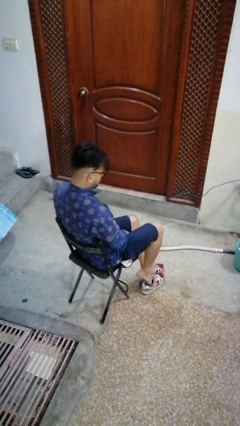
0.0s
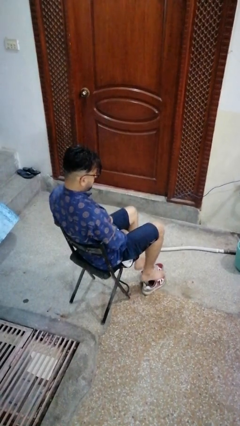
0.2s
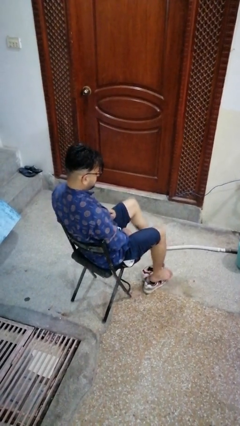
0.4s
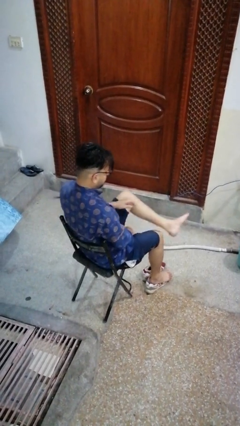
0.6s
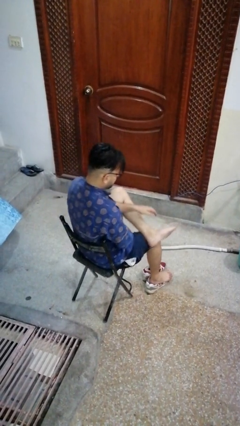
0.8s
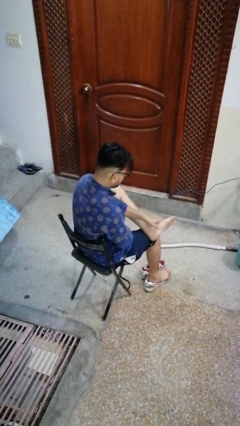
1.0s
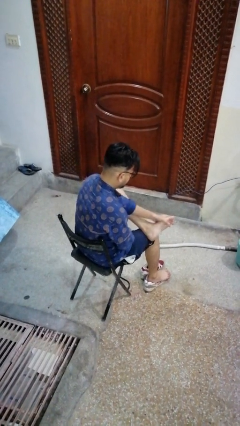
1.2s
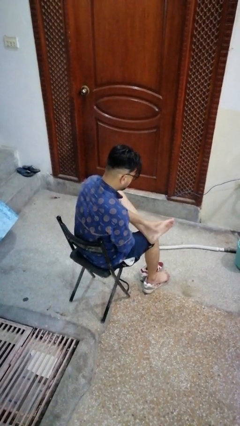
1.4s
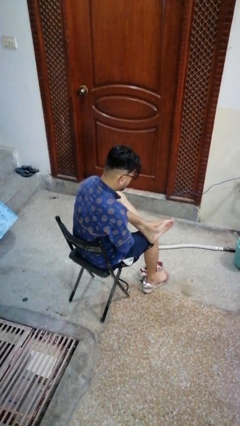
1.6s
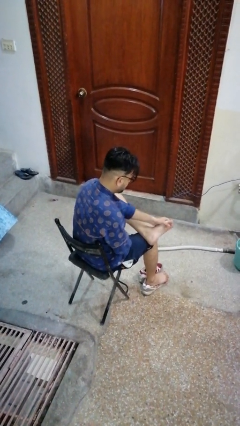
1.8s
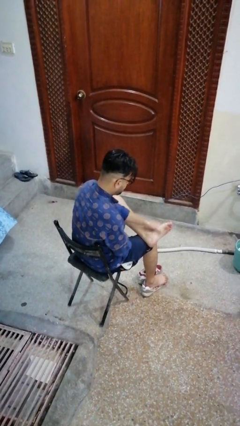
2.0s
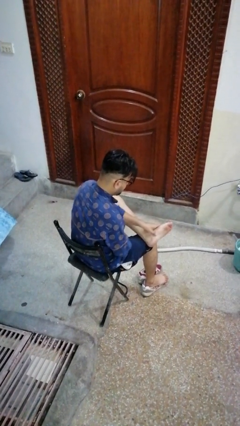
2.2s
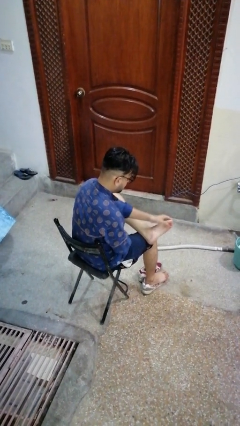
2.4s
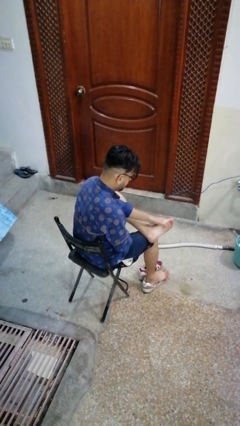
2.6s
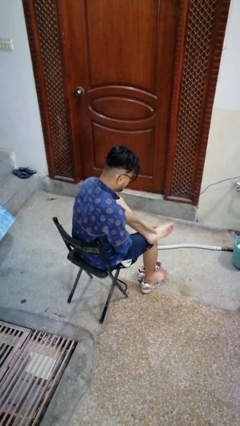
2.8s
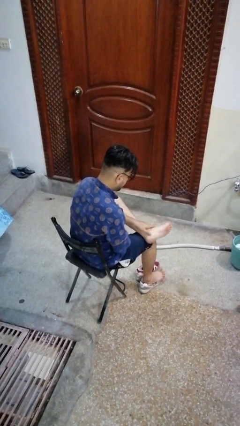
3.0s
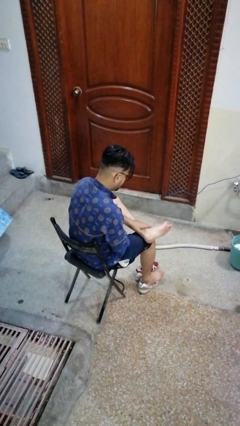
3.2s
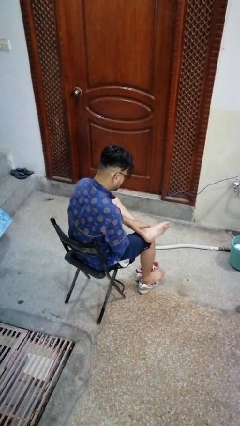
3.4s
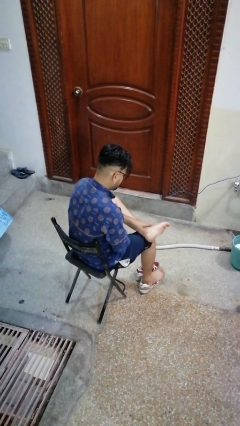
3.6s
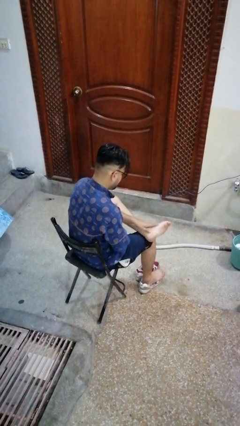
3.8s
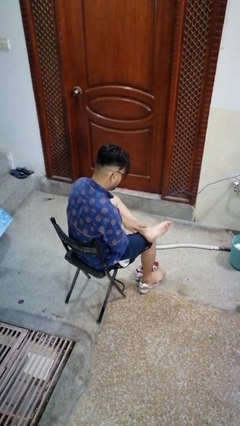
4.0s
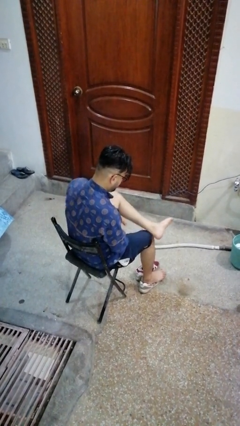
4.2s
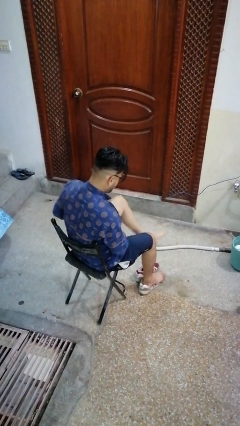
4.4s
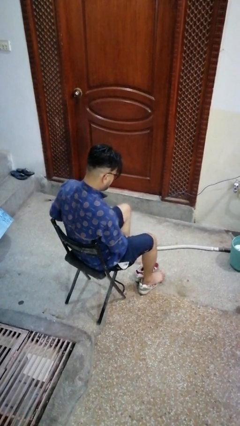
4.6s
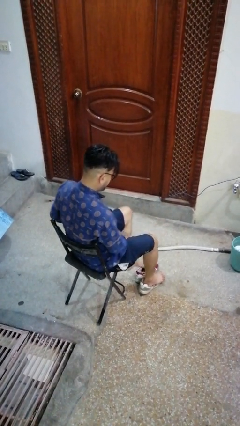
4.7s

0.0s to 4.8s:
person rubs foot

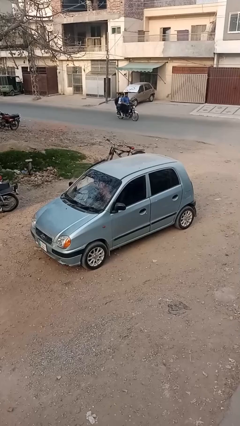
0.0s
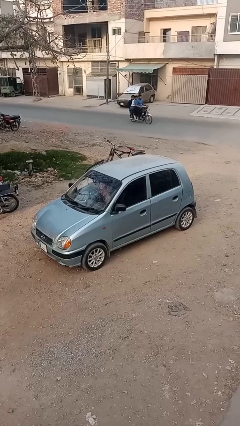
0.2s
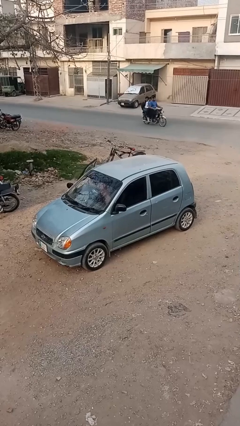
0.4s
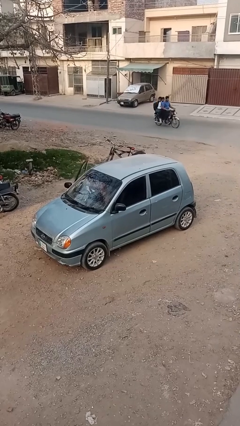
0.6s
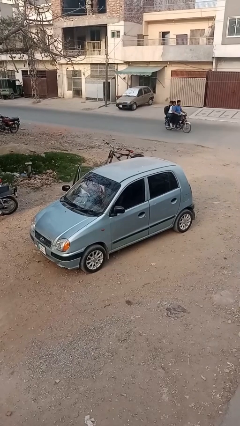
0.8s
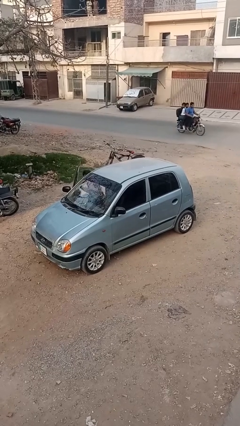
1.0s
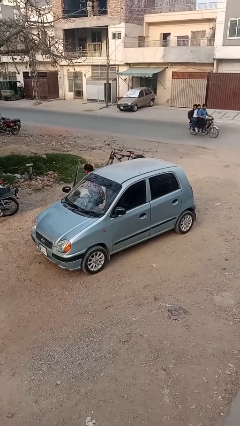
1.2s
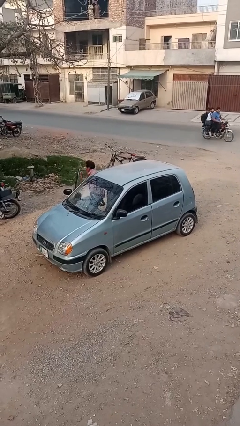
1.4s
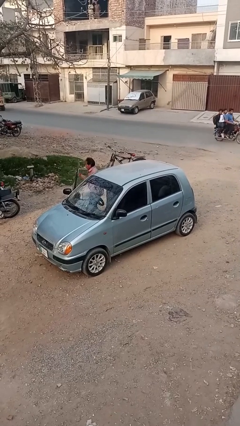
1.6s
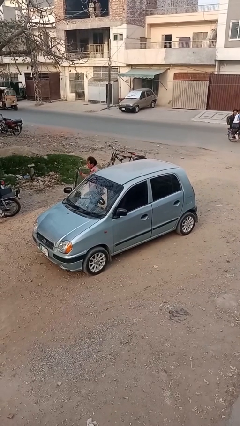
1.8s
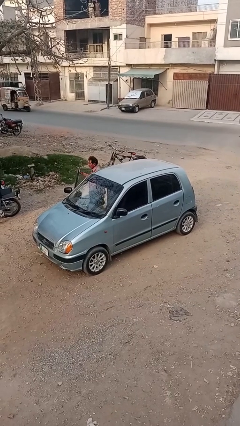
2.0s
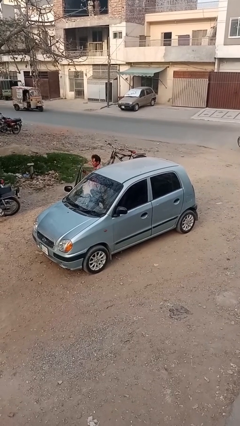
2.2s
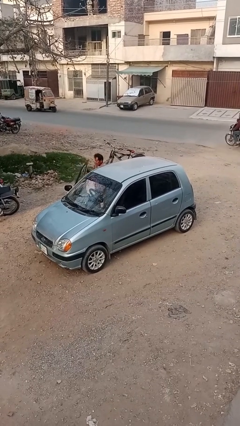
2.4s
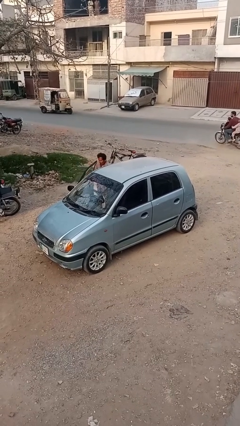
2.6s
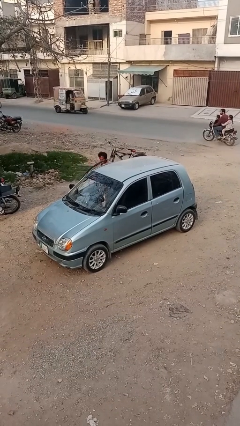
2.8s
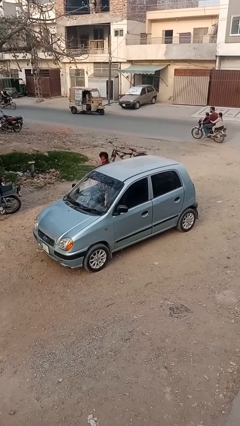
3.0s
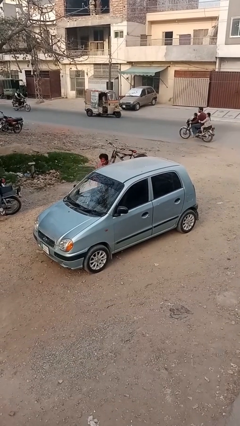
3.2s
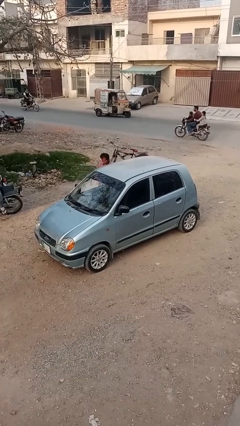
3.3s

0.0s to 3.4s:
car drops off person

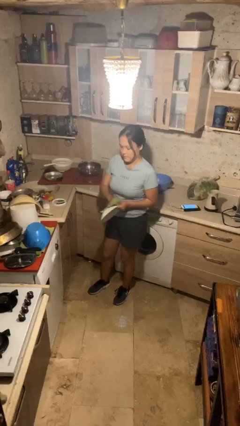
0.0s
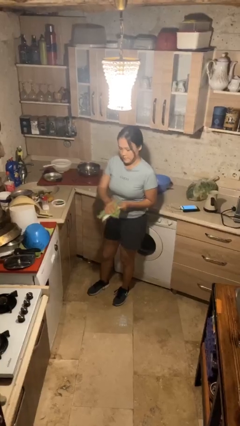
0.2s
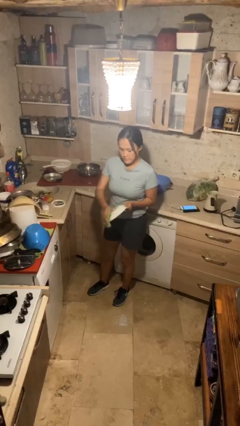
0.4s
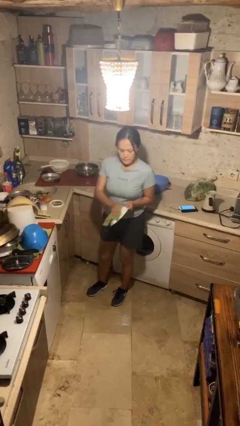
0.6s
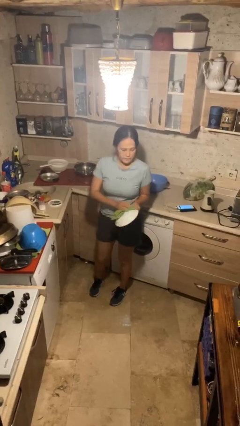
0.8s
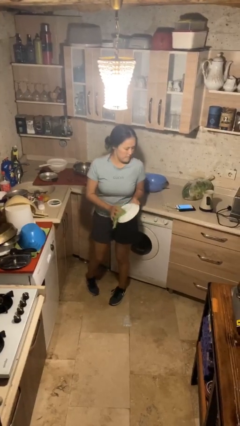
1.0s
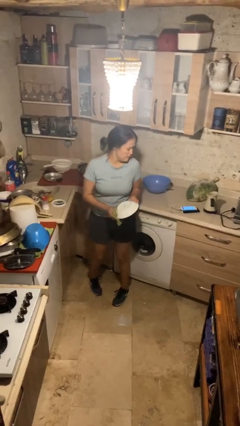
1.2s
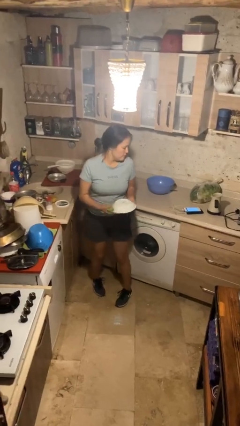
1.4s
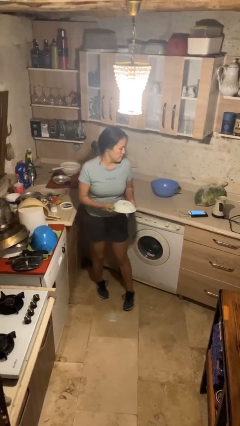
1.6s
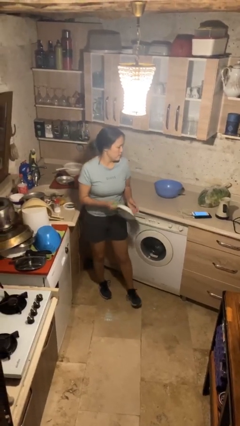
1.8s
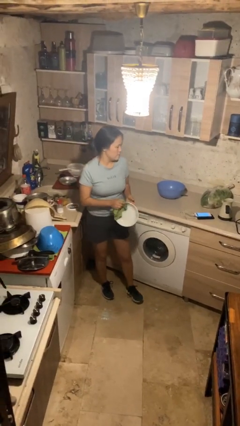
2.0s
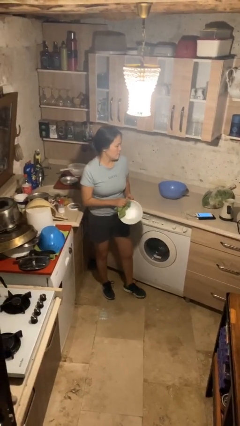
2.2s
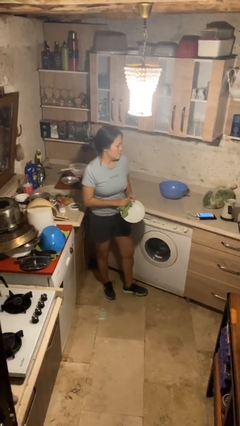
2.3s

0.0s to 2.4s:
person dries dish

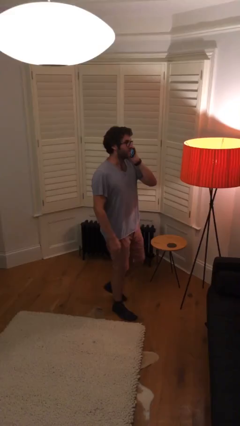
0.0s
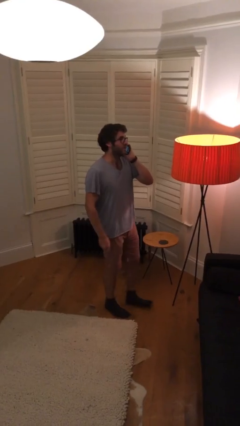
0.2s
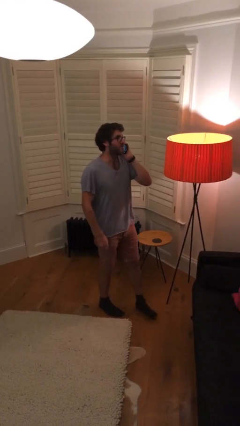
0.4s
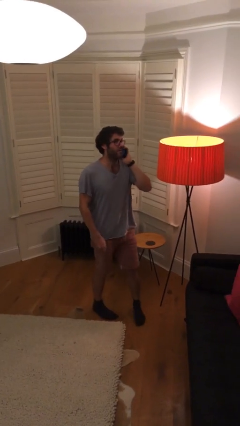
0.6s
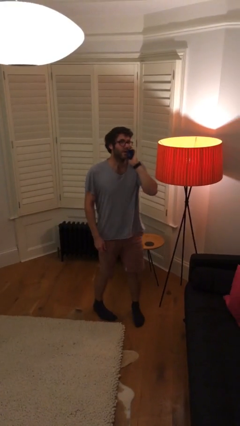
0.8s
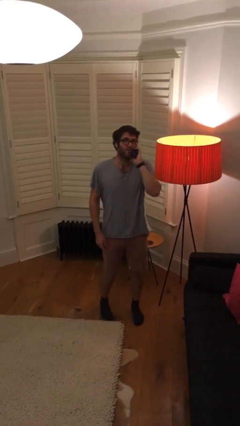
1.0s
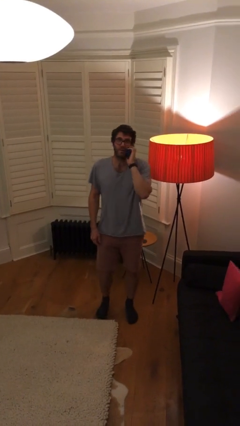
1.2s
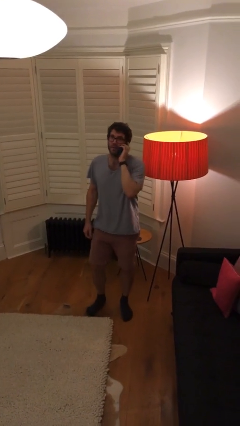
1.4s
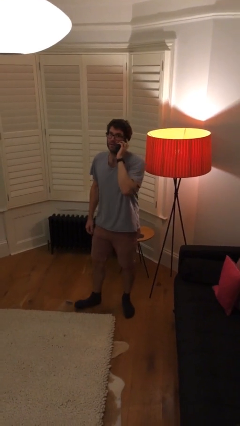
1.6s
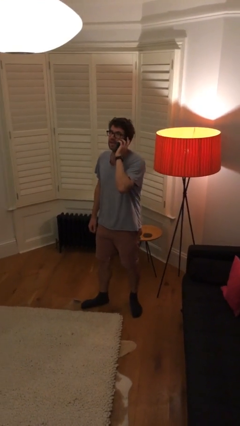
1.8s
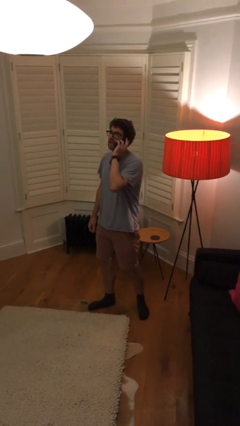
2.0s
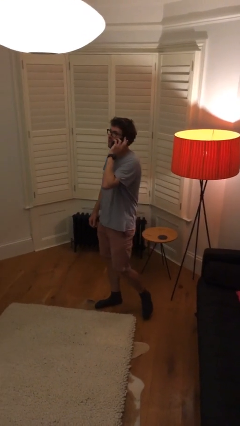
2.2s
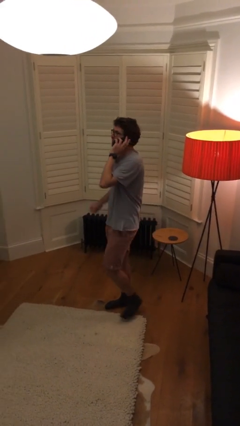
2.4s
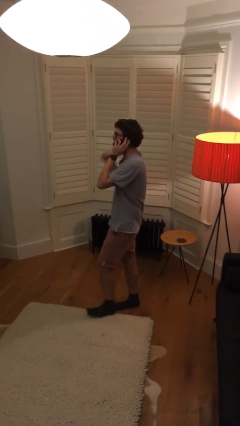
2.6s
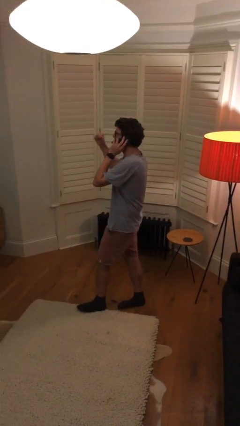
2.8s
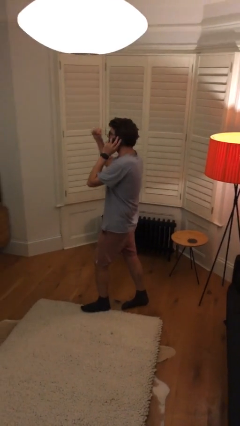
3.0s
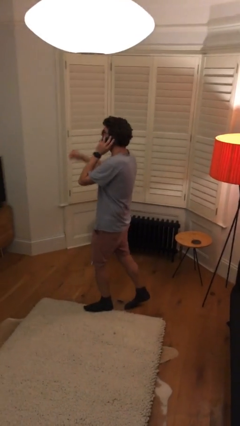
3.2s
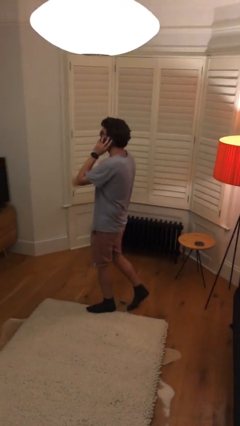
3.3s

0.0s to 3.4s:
person talks on phone

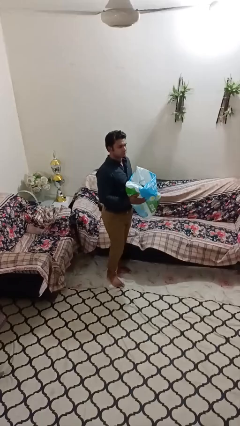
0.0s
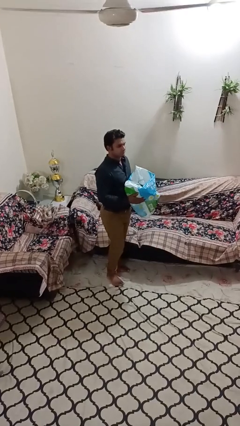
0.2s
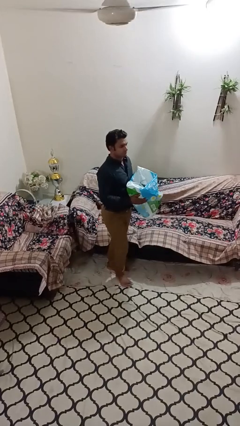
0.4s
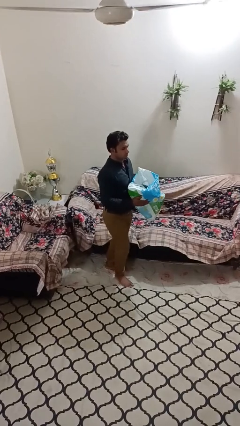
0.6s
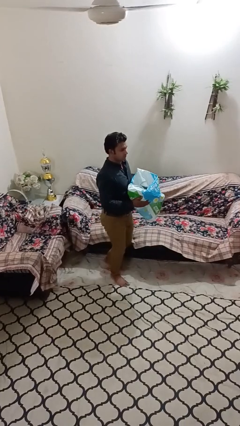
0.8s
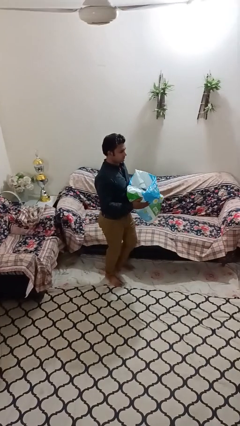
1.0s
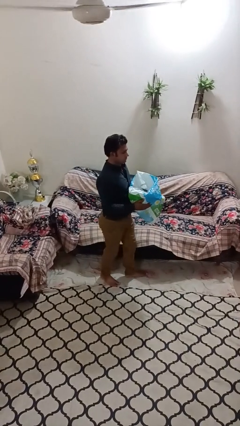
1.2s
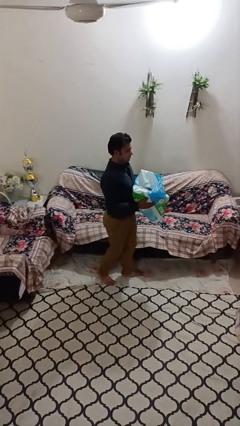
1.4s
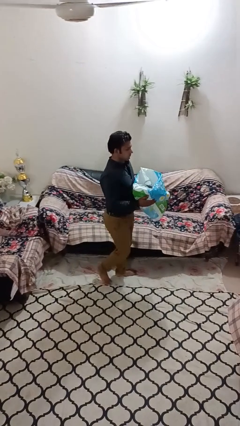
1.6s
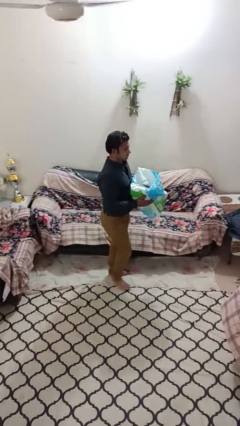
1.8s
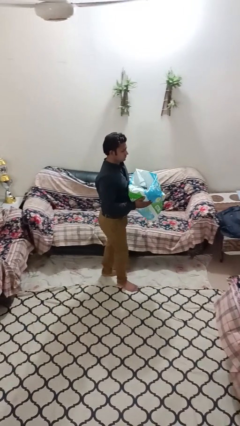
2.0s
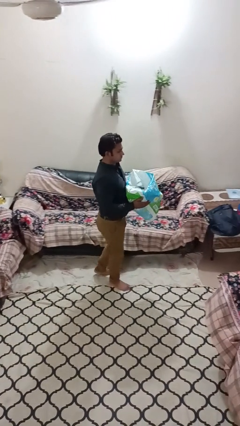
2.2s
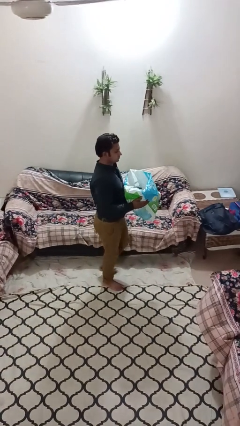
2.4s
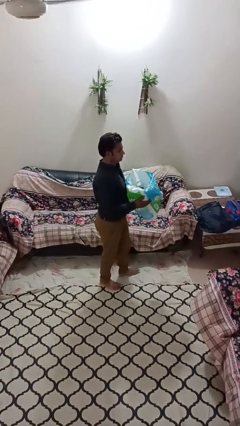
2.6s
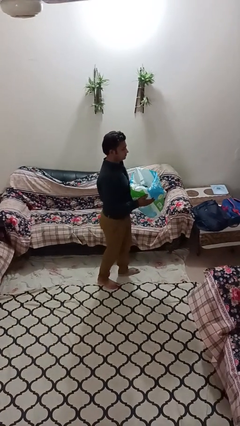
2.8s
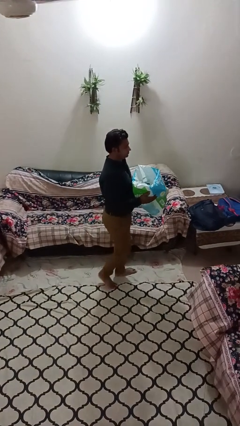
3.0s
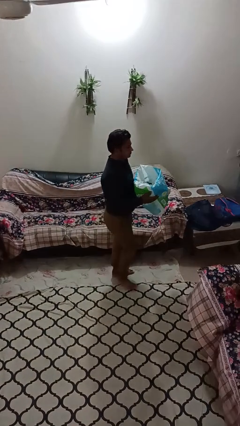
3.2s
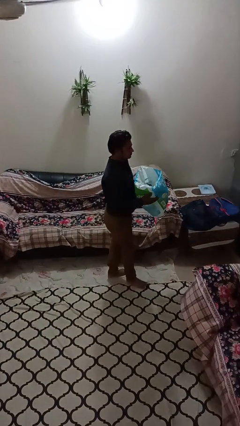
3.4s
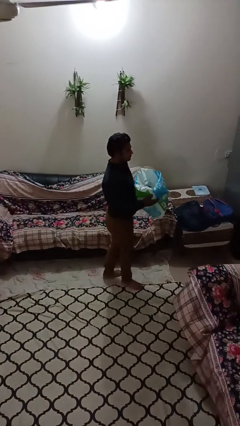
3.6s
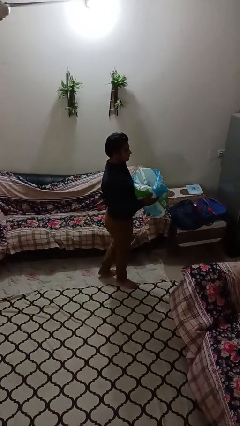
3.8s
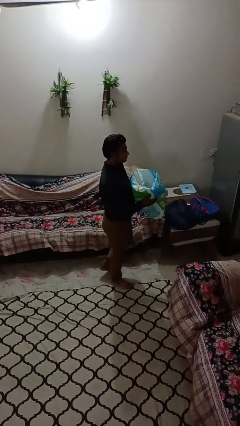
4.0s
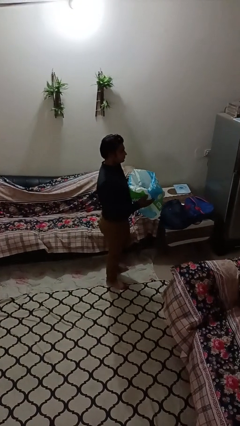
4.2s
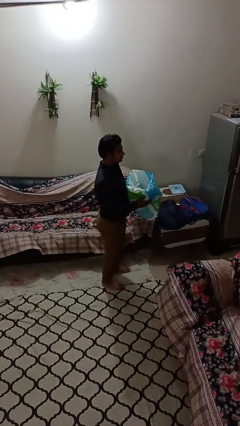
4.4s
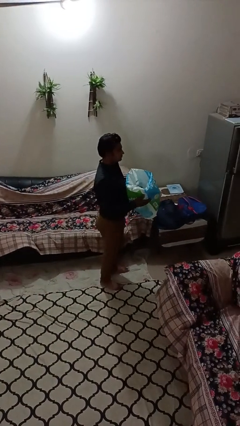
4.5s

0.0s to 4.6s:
person carries groceries
